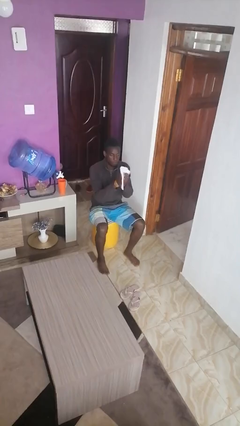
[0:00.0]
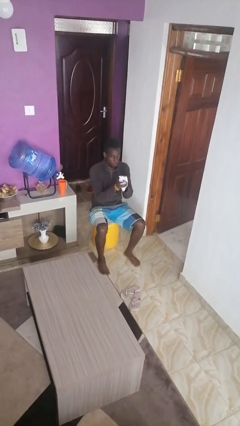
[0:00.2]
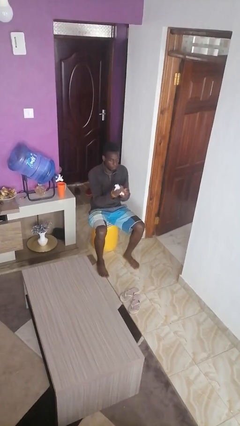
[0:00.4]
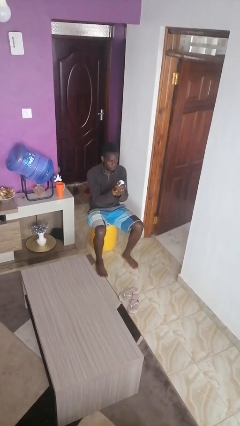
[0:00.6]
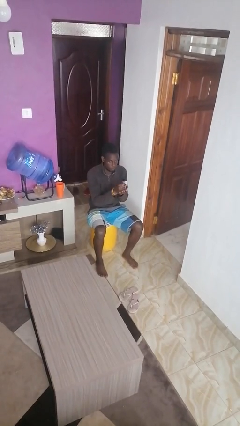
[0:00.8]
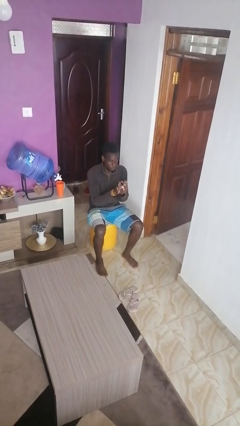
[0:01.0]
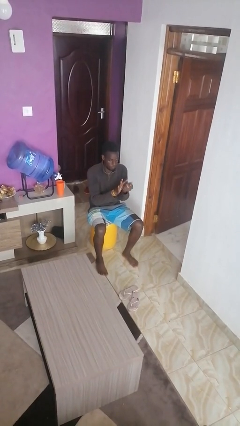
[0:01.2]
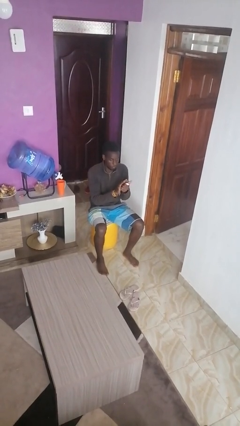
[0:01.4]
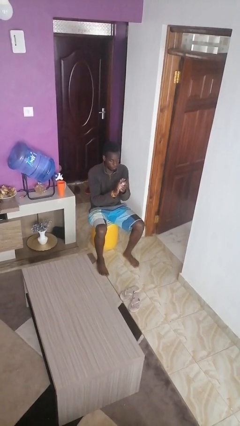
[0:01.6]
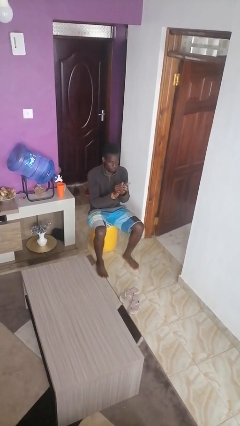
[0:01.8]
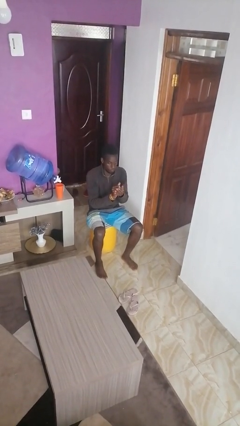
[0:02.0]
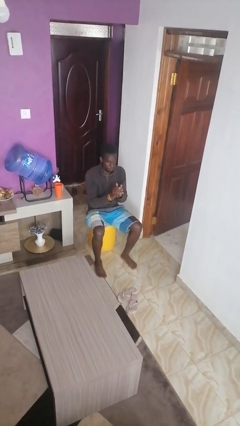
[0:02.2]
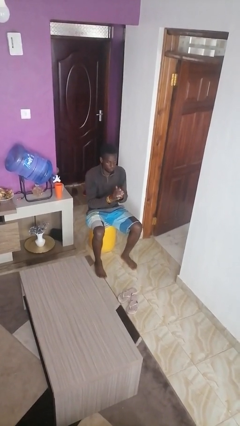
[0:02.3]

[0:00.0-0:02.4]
person crumples paper

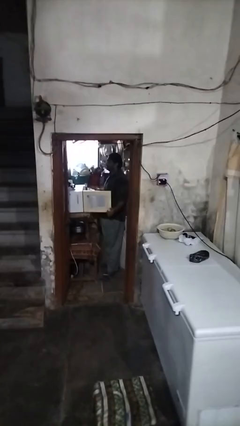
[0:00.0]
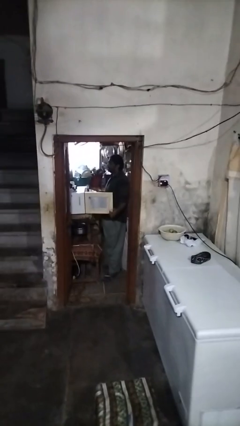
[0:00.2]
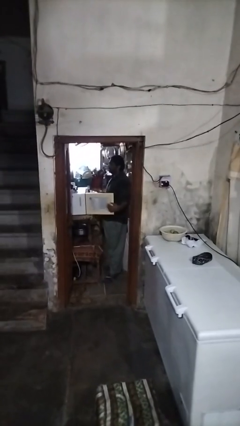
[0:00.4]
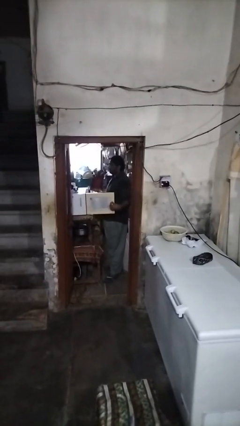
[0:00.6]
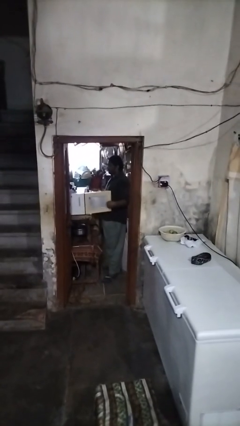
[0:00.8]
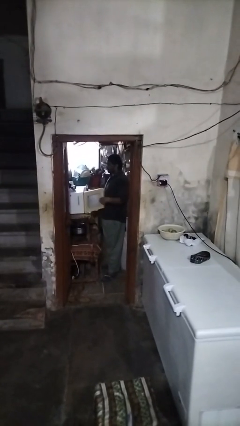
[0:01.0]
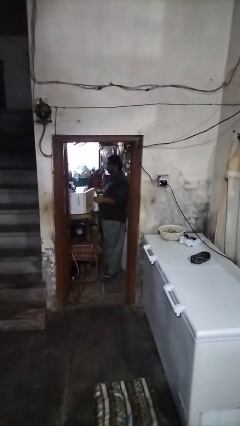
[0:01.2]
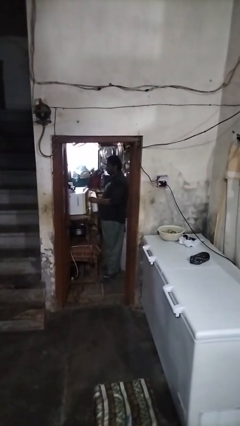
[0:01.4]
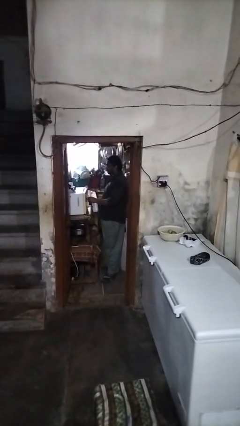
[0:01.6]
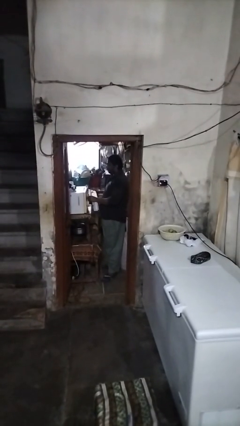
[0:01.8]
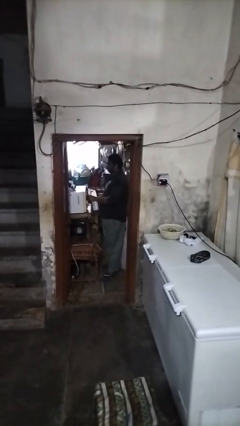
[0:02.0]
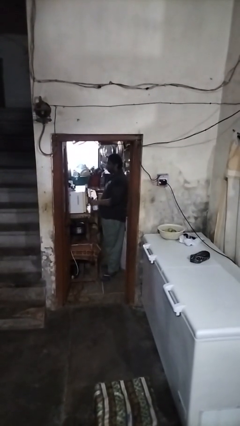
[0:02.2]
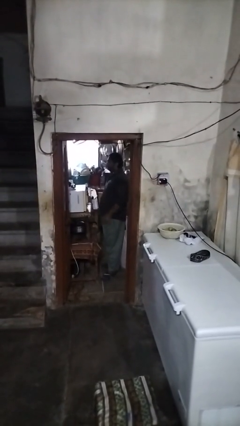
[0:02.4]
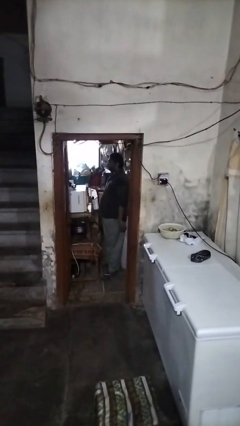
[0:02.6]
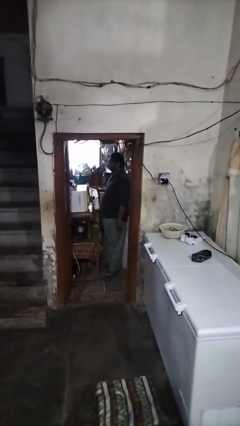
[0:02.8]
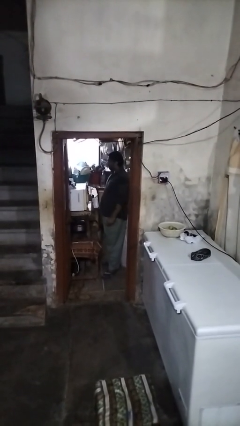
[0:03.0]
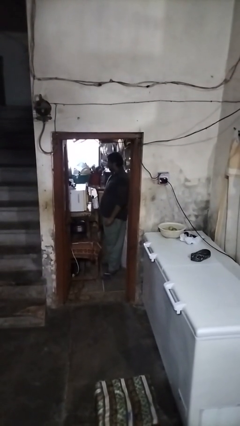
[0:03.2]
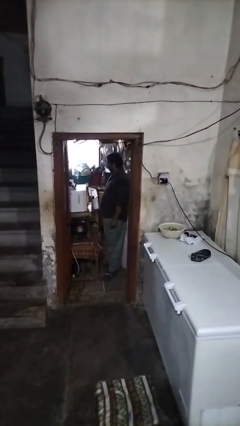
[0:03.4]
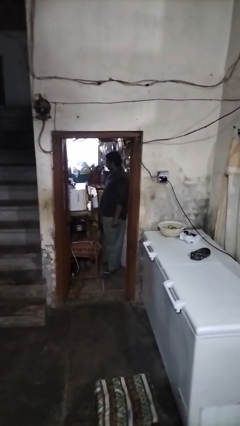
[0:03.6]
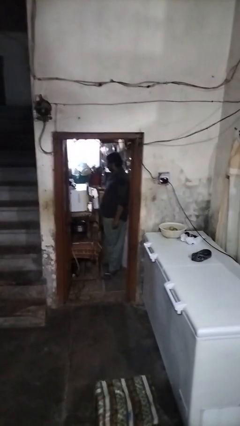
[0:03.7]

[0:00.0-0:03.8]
person closes oven door

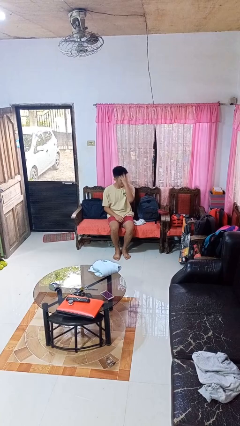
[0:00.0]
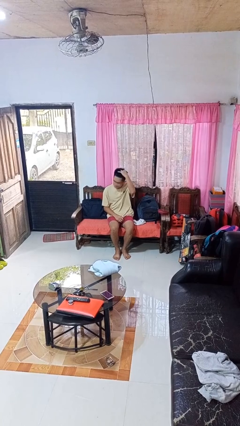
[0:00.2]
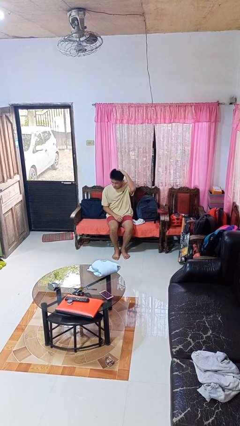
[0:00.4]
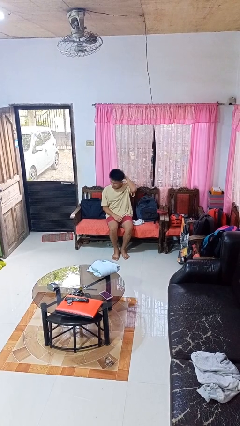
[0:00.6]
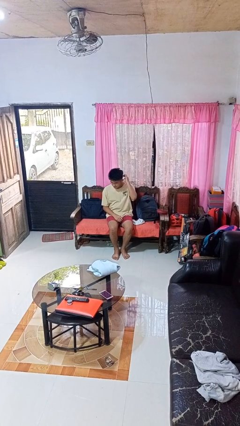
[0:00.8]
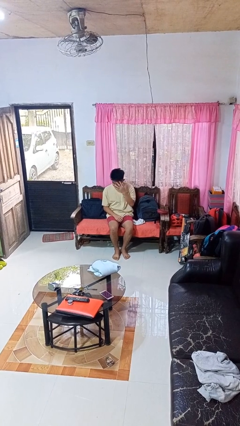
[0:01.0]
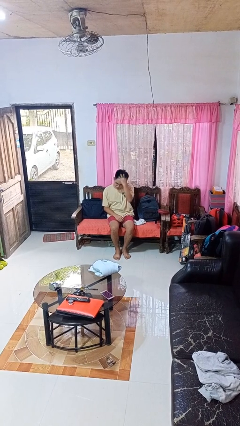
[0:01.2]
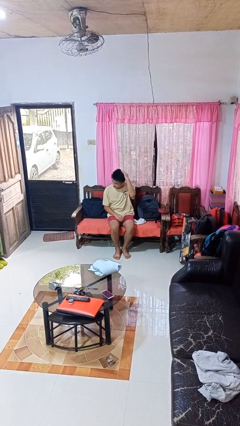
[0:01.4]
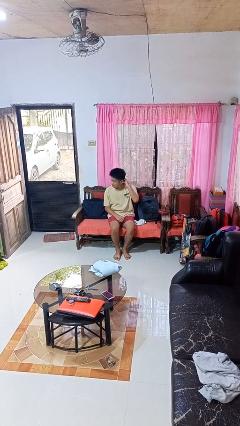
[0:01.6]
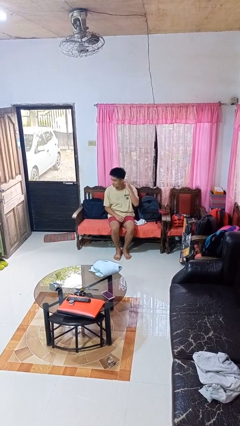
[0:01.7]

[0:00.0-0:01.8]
person strokes hair

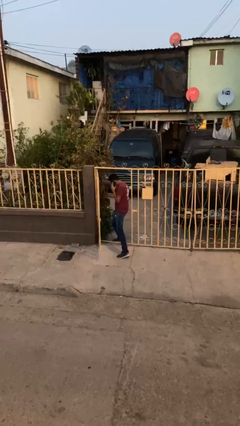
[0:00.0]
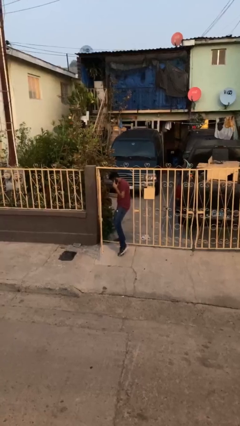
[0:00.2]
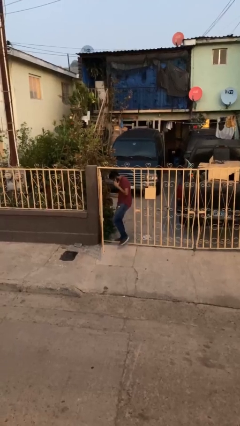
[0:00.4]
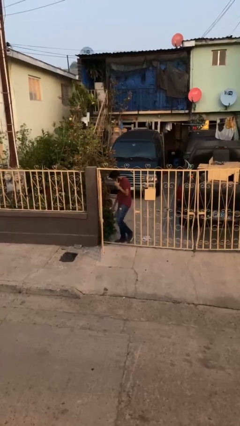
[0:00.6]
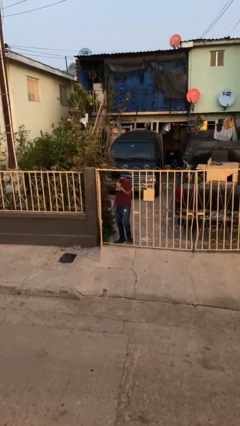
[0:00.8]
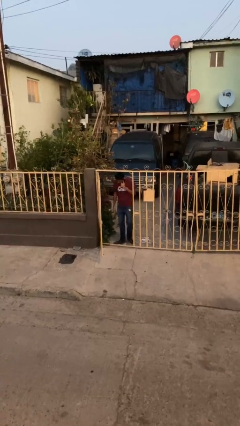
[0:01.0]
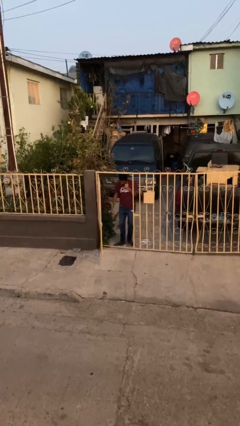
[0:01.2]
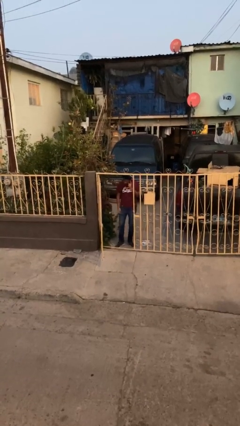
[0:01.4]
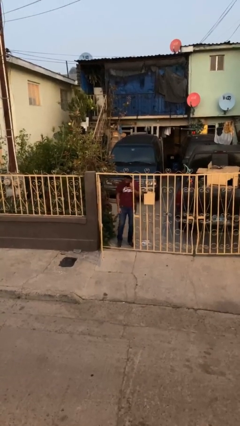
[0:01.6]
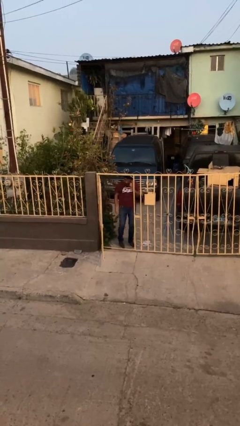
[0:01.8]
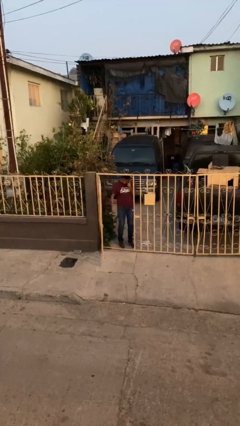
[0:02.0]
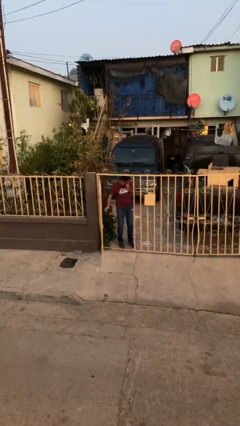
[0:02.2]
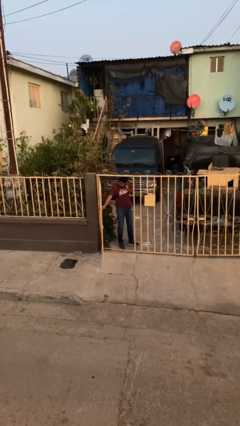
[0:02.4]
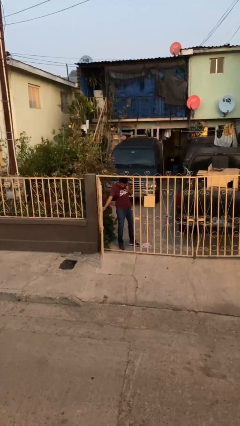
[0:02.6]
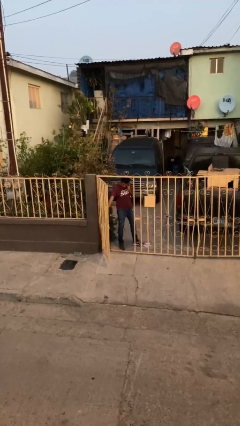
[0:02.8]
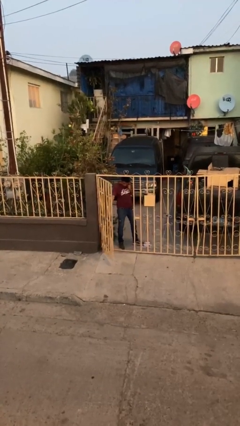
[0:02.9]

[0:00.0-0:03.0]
person exits scene through structure

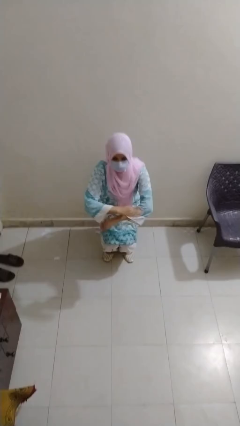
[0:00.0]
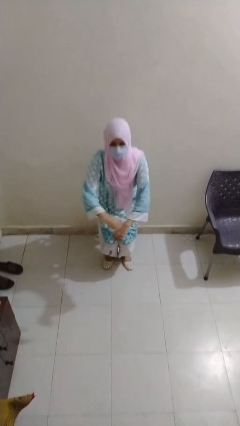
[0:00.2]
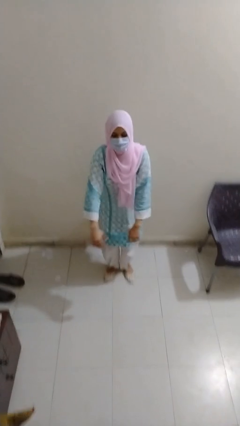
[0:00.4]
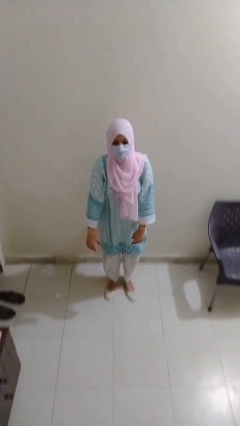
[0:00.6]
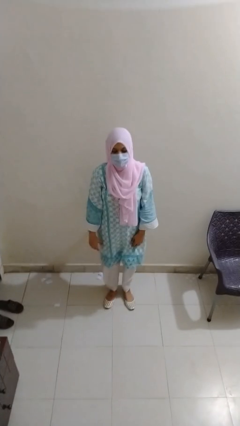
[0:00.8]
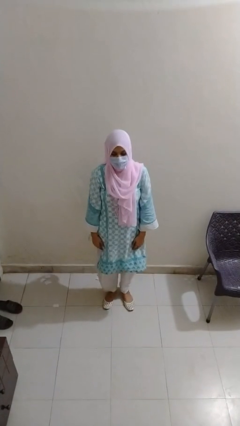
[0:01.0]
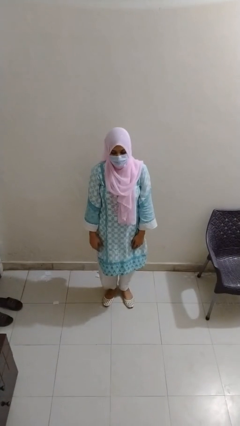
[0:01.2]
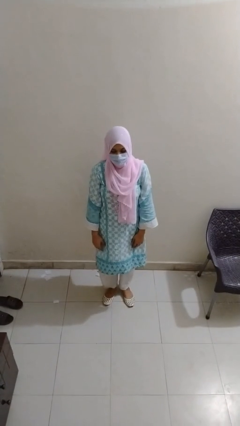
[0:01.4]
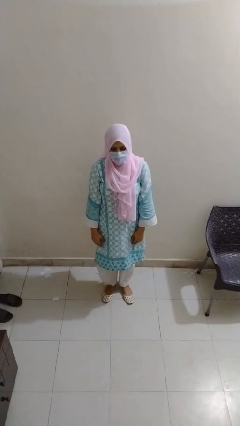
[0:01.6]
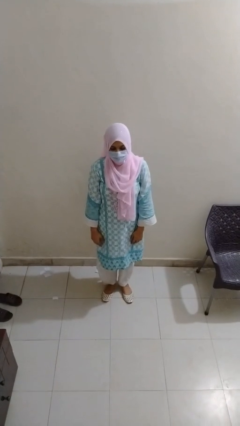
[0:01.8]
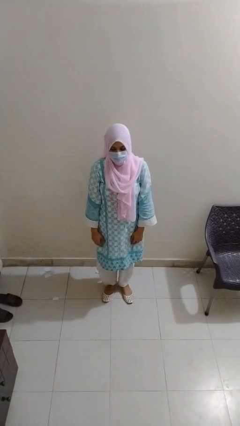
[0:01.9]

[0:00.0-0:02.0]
person stands up

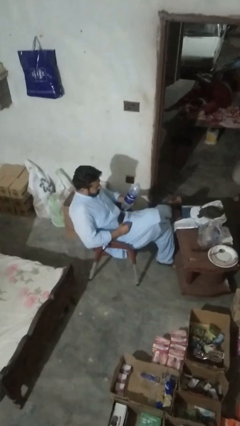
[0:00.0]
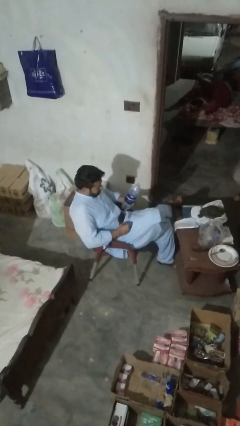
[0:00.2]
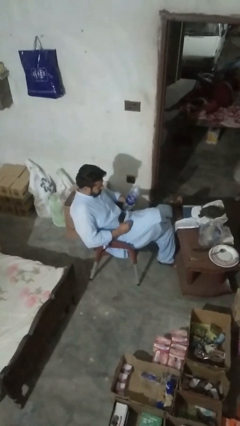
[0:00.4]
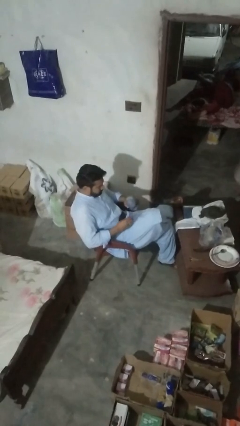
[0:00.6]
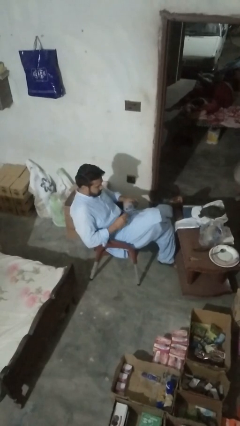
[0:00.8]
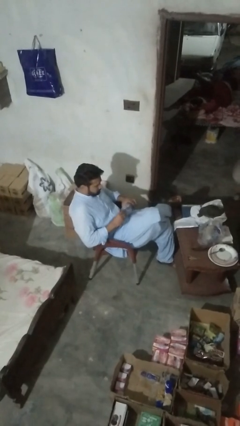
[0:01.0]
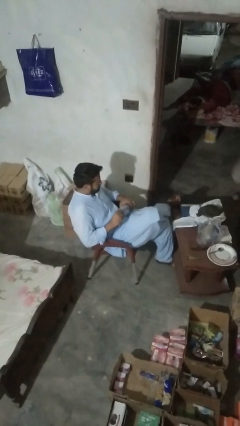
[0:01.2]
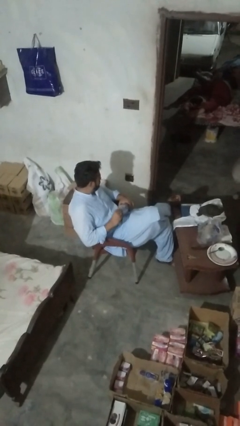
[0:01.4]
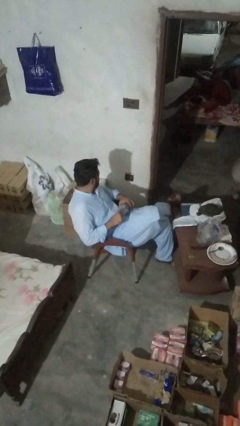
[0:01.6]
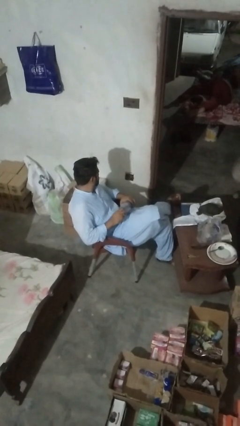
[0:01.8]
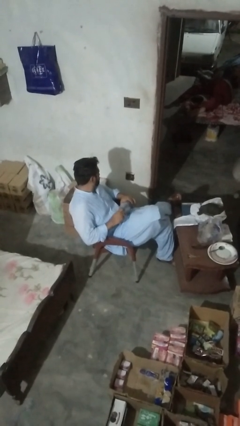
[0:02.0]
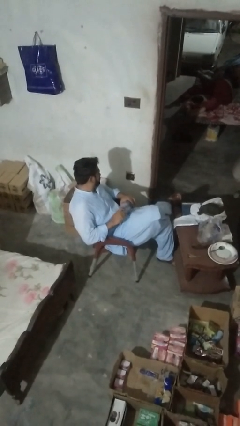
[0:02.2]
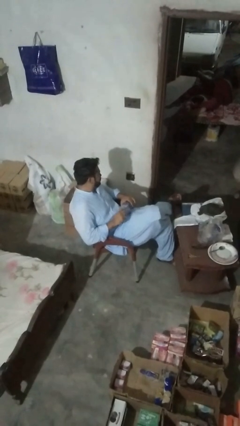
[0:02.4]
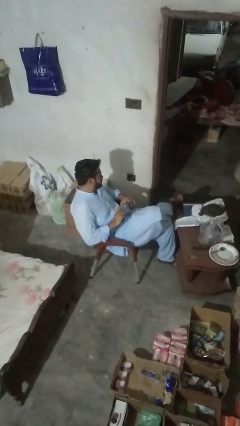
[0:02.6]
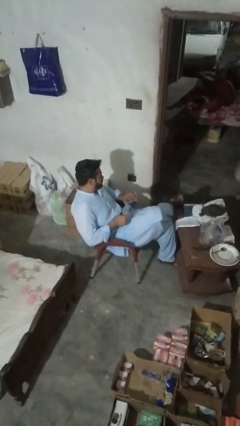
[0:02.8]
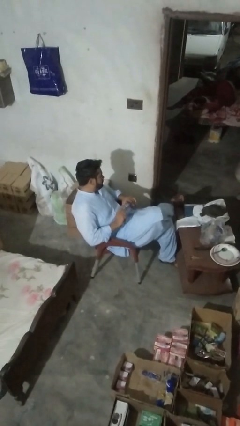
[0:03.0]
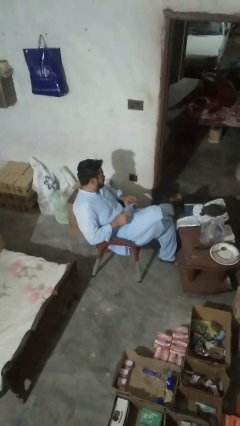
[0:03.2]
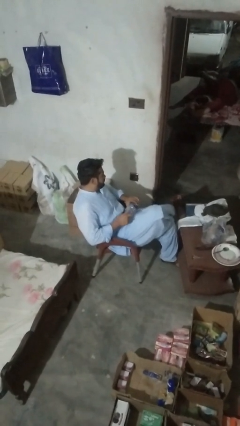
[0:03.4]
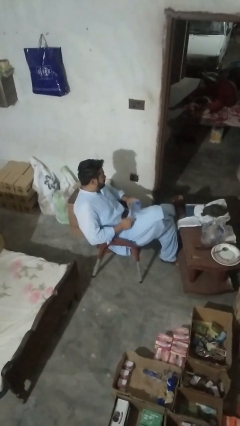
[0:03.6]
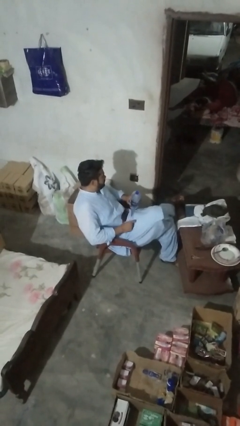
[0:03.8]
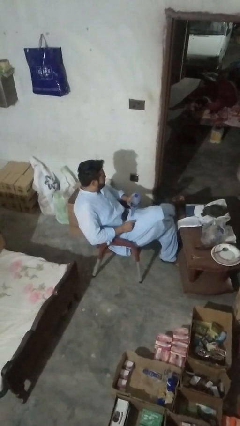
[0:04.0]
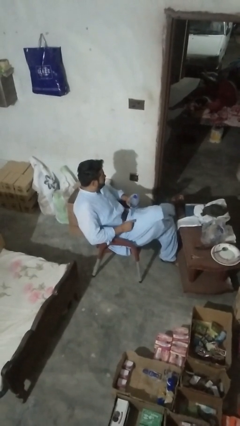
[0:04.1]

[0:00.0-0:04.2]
person screws lid to bottle
